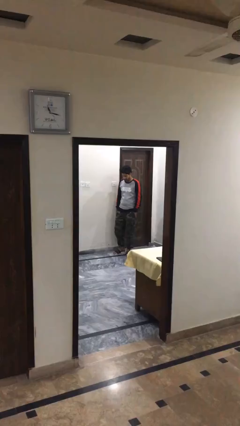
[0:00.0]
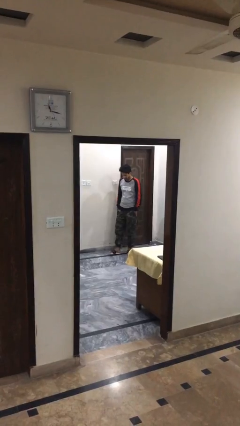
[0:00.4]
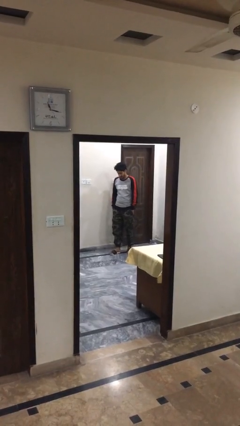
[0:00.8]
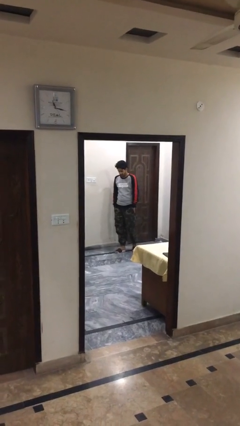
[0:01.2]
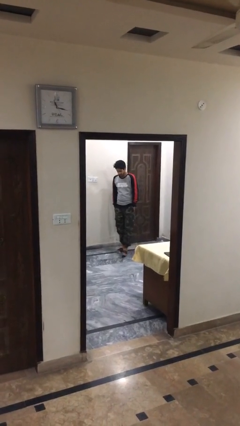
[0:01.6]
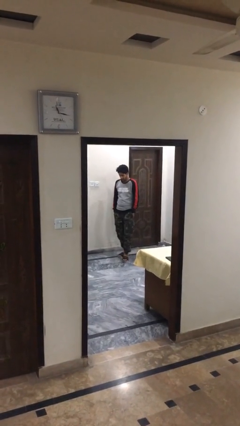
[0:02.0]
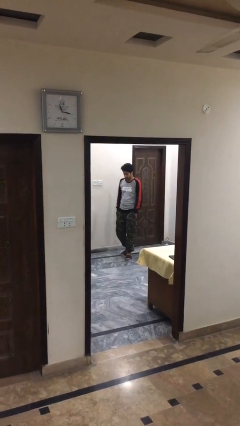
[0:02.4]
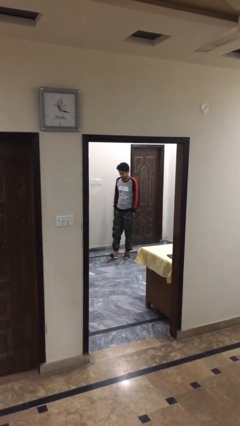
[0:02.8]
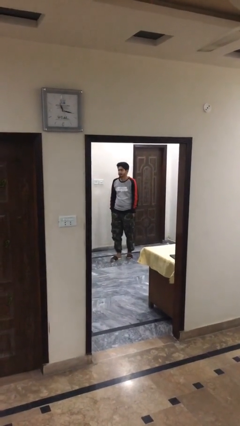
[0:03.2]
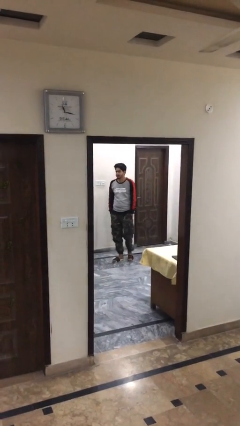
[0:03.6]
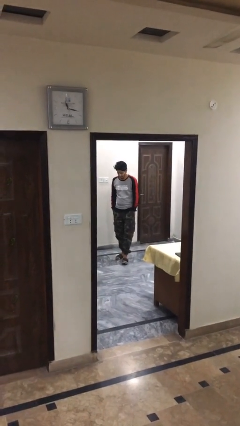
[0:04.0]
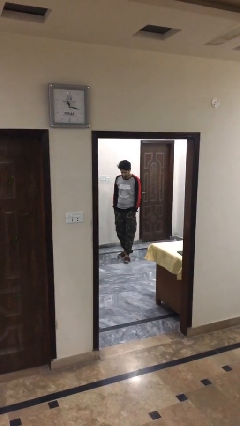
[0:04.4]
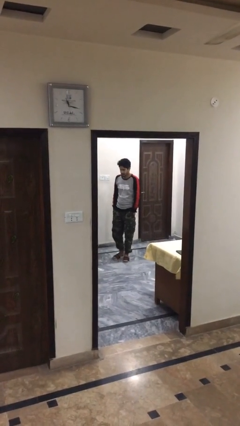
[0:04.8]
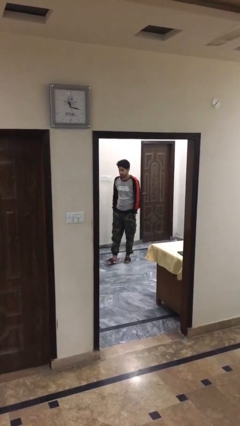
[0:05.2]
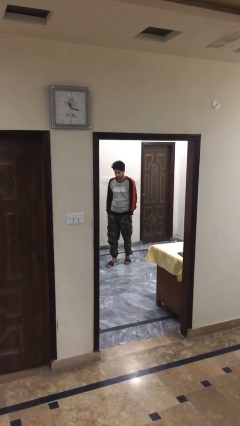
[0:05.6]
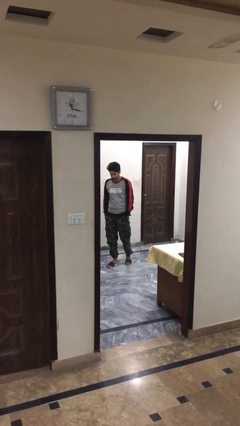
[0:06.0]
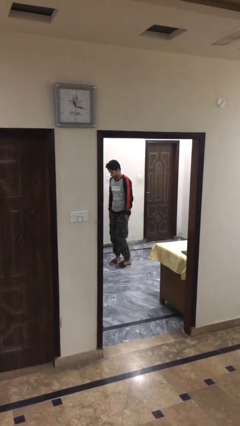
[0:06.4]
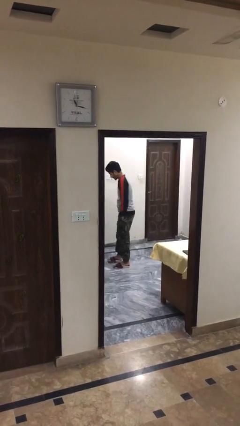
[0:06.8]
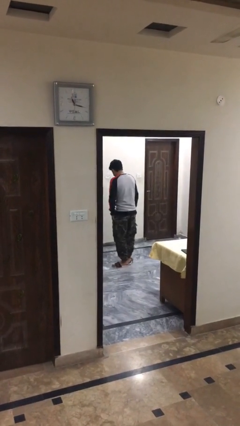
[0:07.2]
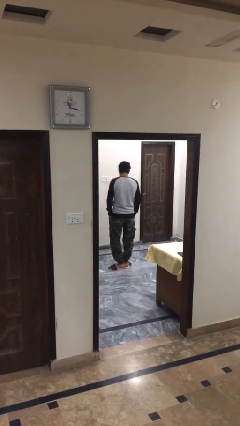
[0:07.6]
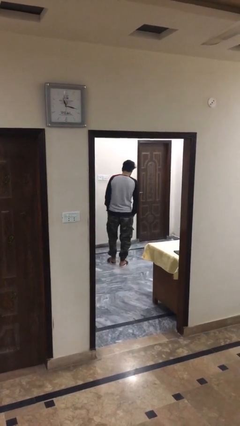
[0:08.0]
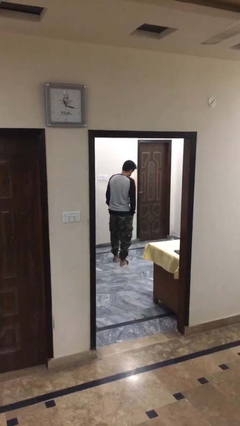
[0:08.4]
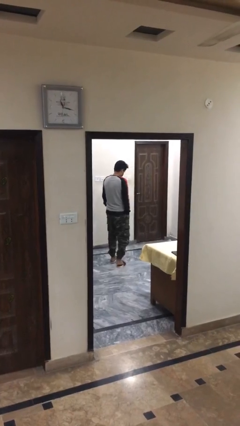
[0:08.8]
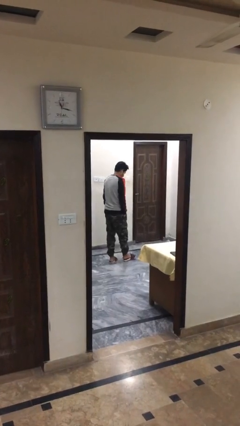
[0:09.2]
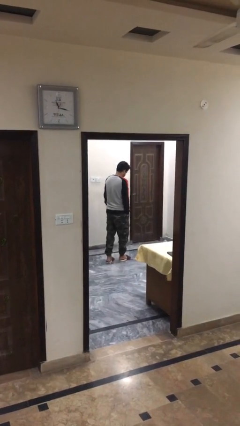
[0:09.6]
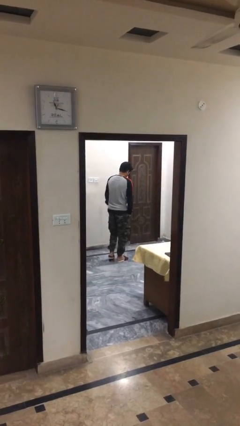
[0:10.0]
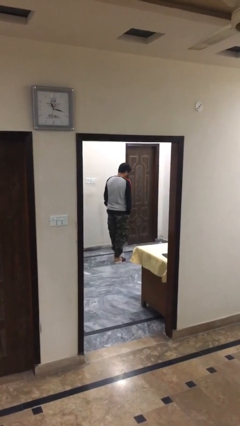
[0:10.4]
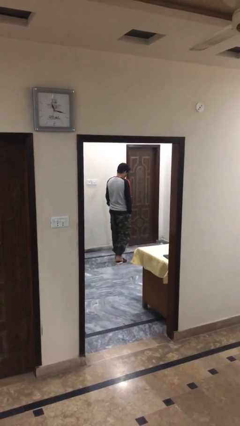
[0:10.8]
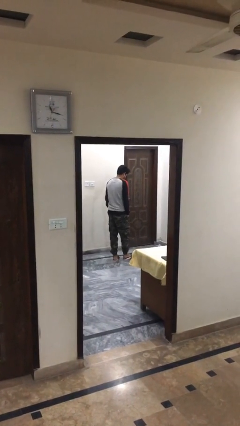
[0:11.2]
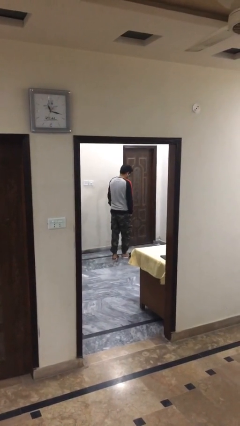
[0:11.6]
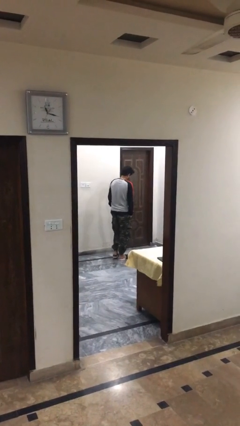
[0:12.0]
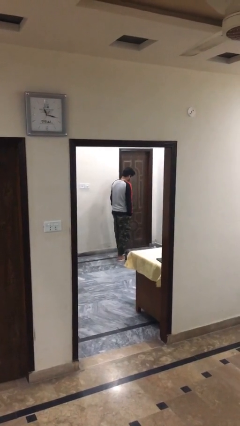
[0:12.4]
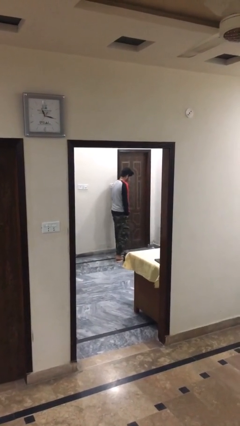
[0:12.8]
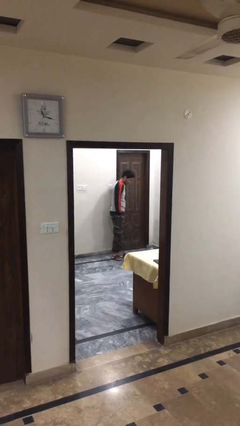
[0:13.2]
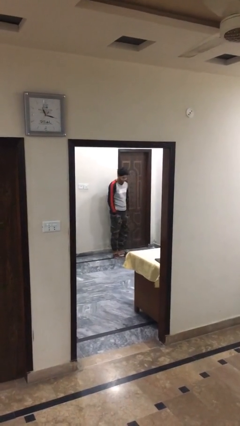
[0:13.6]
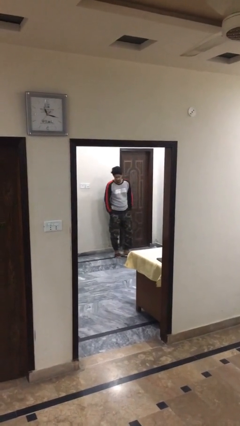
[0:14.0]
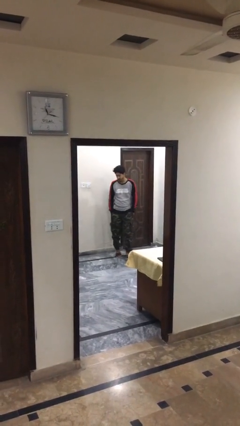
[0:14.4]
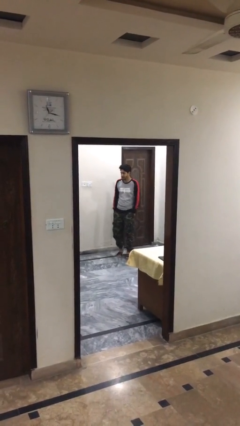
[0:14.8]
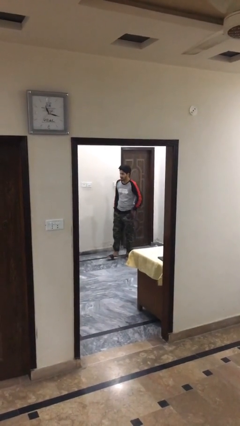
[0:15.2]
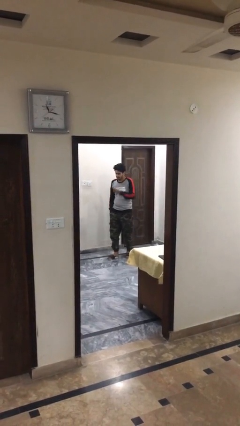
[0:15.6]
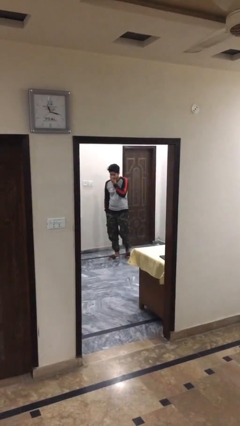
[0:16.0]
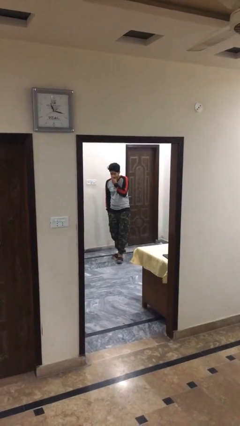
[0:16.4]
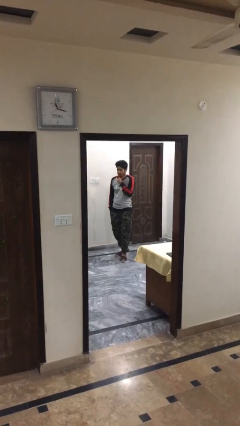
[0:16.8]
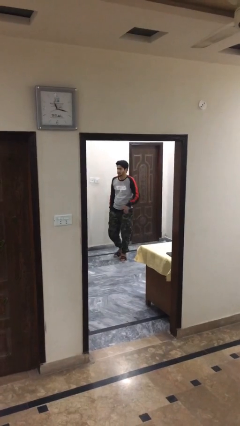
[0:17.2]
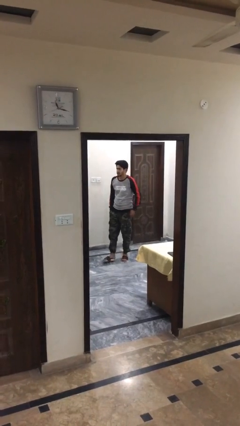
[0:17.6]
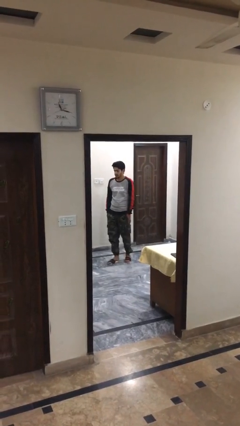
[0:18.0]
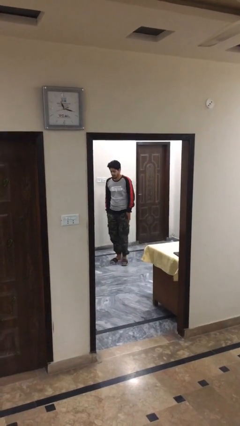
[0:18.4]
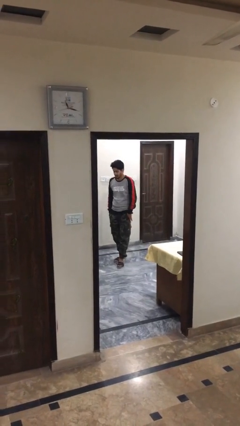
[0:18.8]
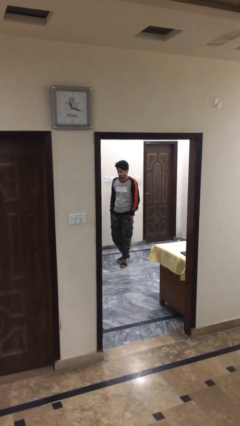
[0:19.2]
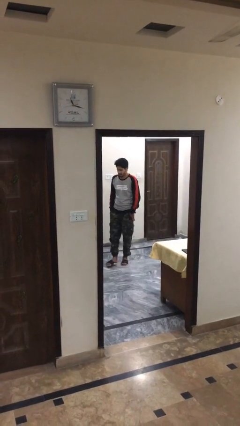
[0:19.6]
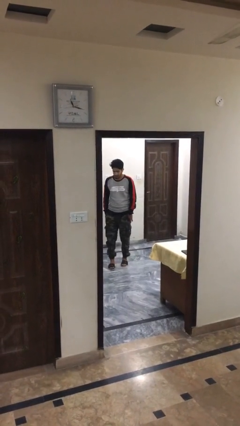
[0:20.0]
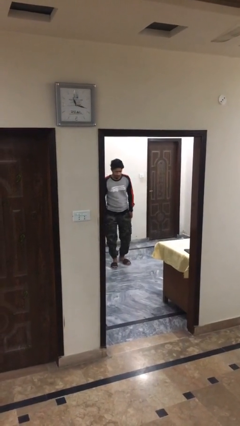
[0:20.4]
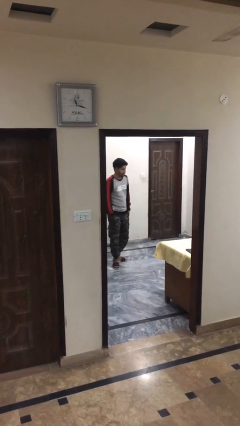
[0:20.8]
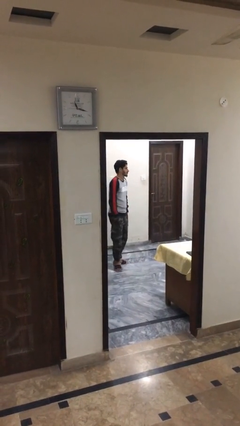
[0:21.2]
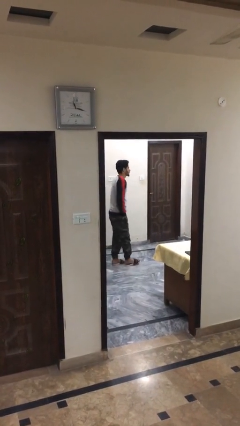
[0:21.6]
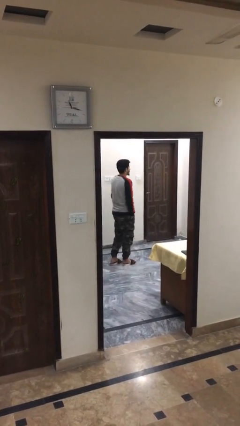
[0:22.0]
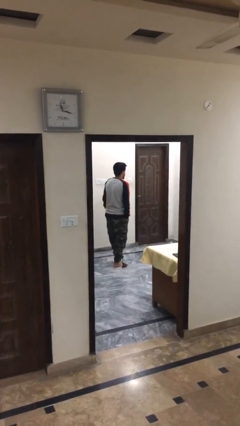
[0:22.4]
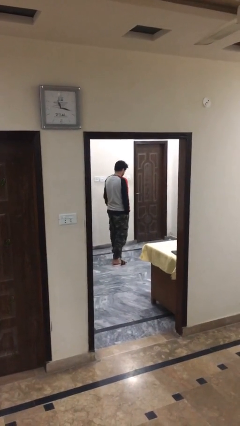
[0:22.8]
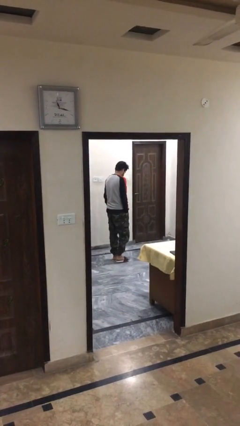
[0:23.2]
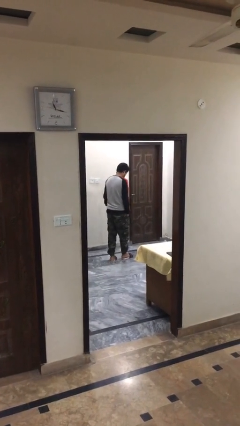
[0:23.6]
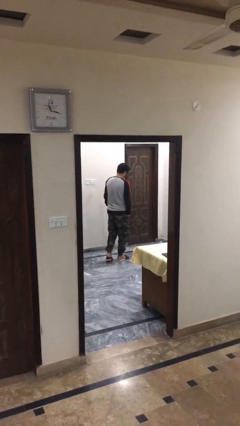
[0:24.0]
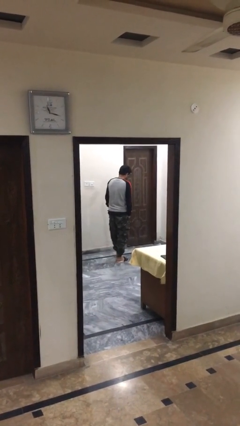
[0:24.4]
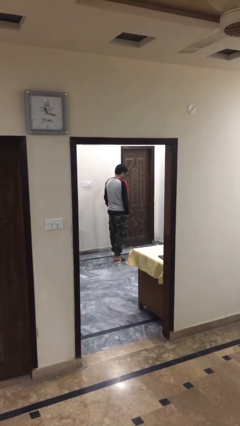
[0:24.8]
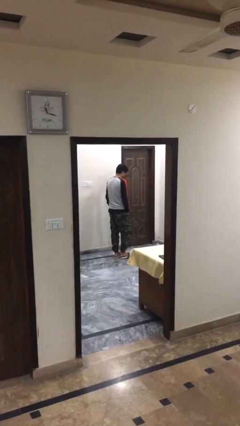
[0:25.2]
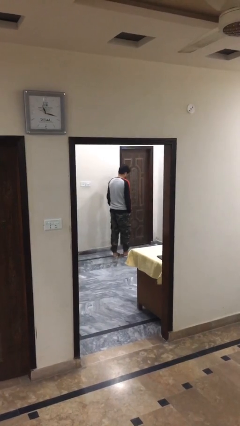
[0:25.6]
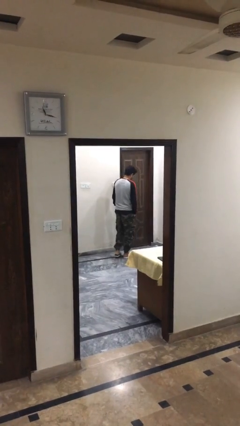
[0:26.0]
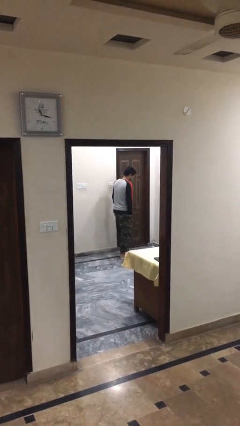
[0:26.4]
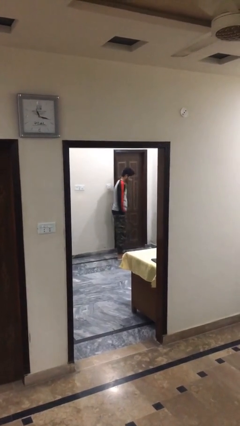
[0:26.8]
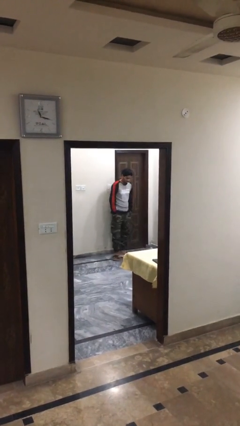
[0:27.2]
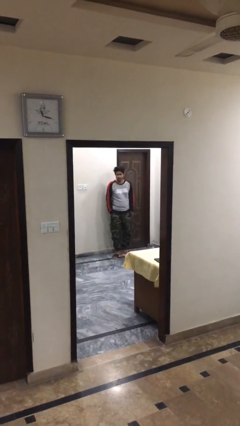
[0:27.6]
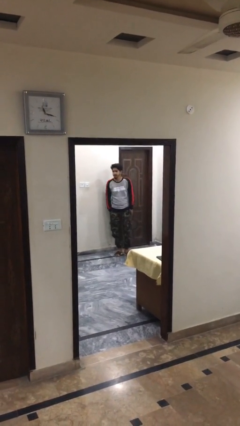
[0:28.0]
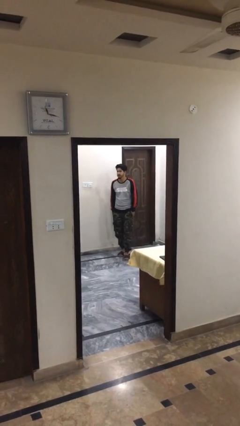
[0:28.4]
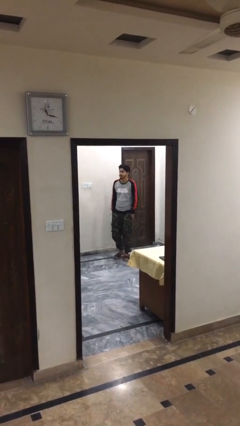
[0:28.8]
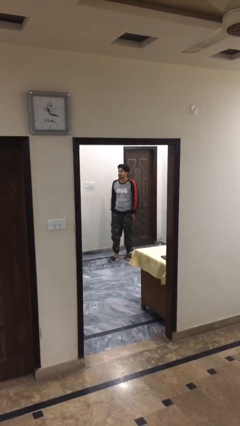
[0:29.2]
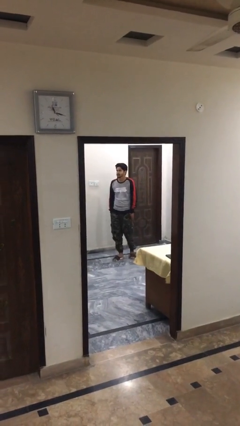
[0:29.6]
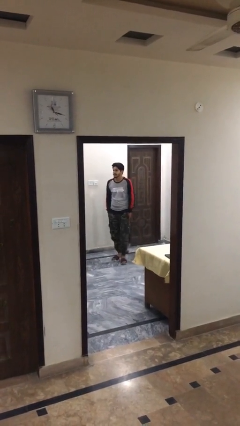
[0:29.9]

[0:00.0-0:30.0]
person walks

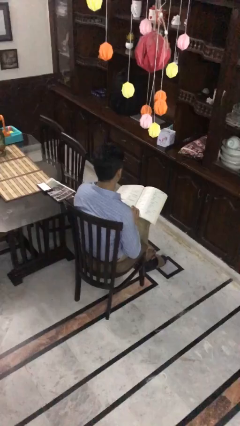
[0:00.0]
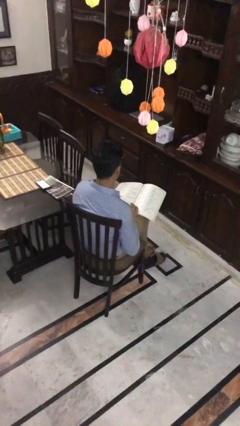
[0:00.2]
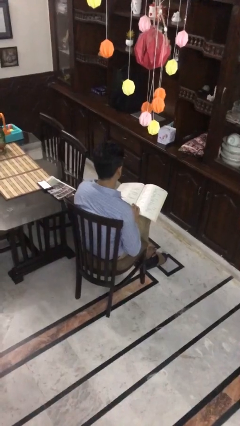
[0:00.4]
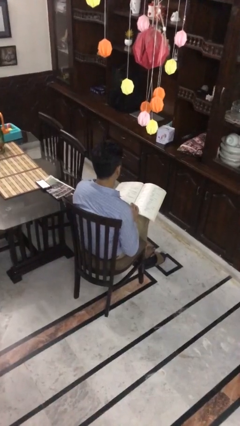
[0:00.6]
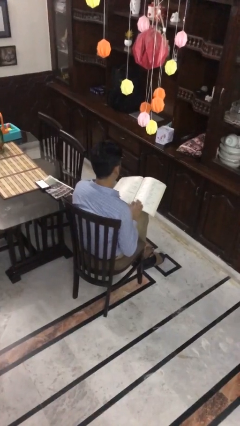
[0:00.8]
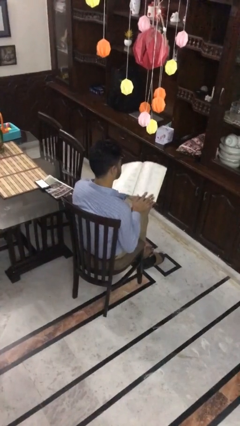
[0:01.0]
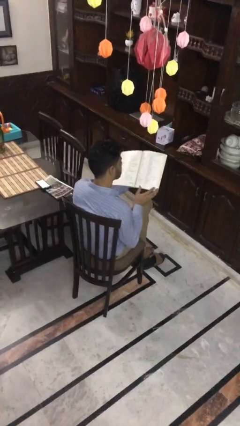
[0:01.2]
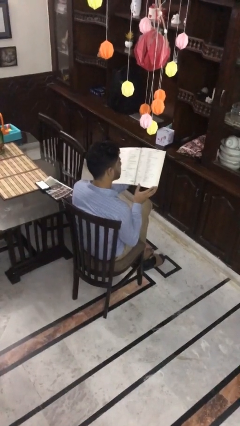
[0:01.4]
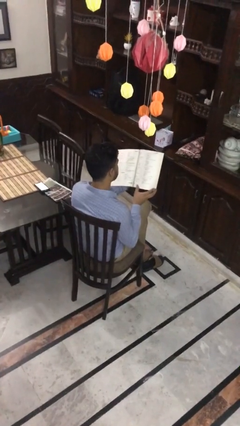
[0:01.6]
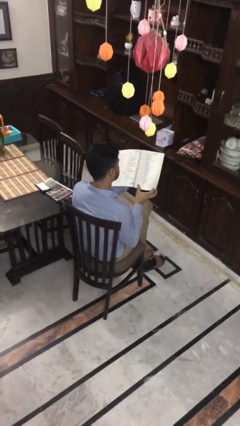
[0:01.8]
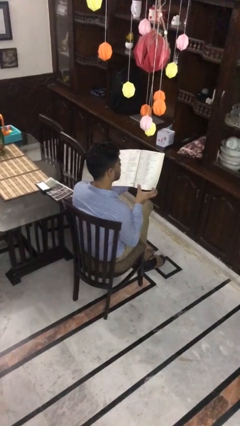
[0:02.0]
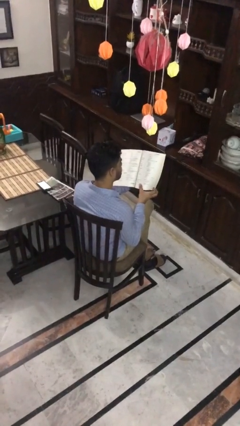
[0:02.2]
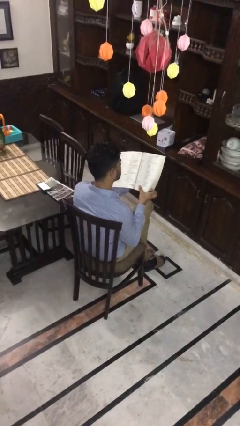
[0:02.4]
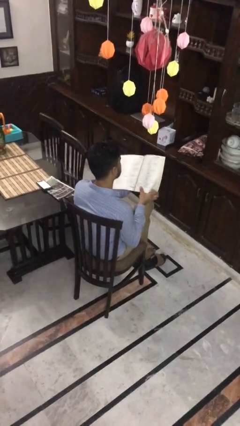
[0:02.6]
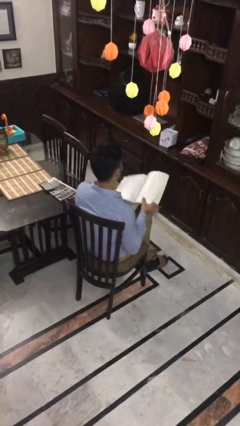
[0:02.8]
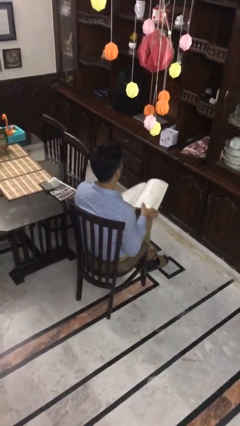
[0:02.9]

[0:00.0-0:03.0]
person reads book
